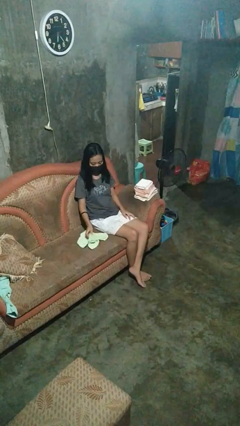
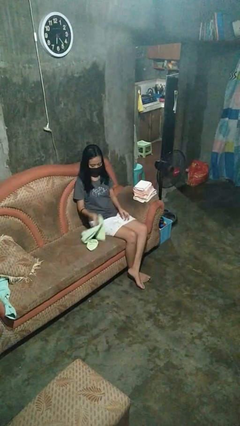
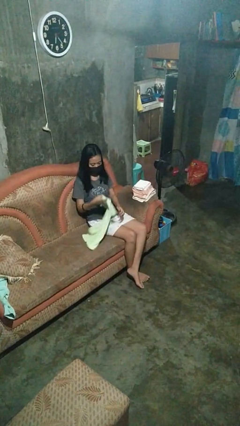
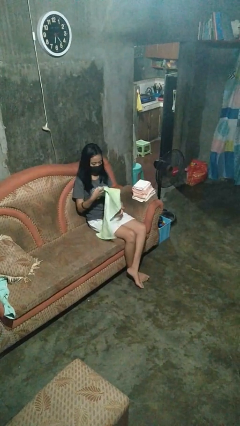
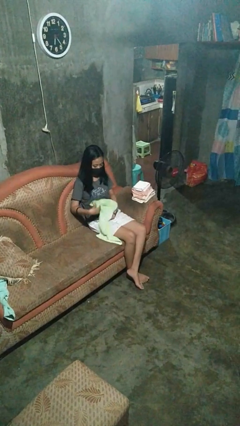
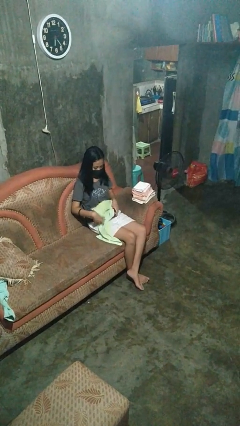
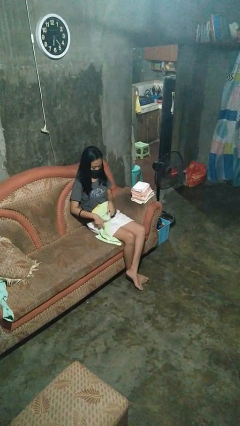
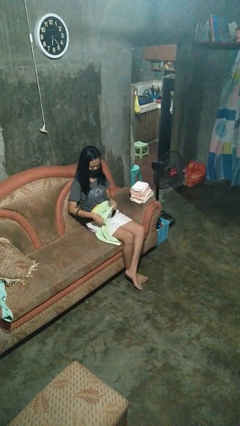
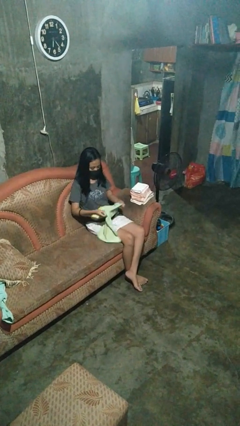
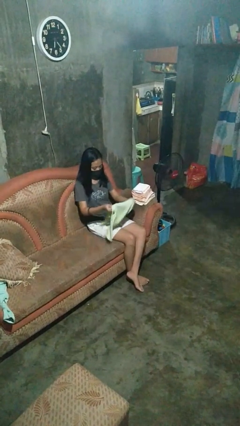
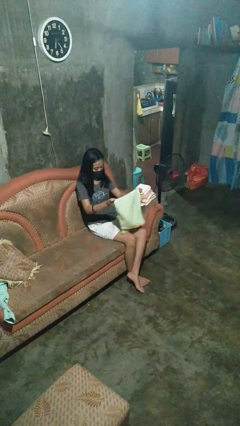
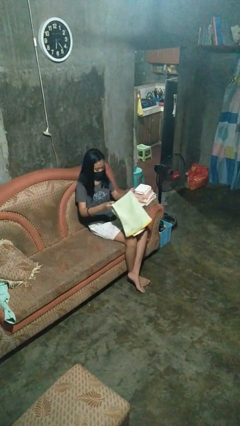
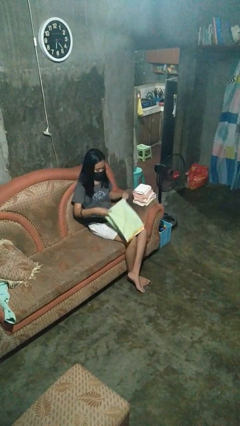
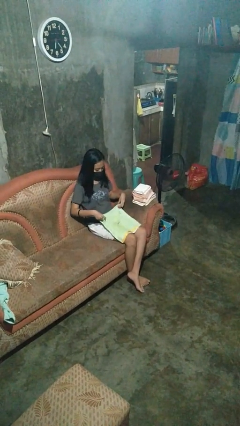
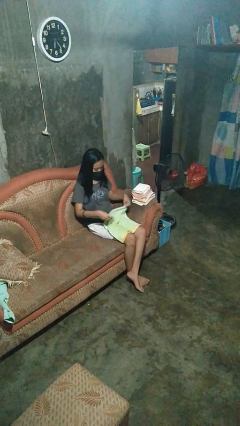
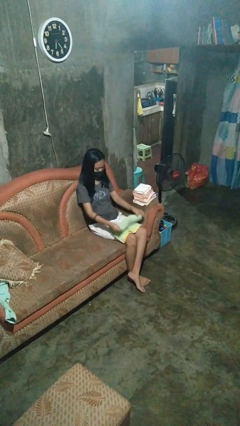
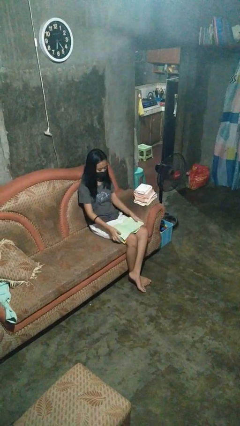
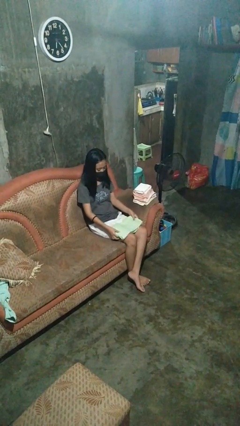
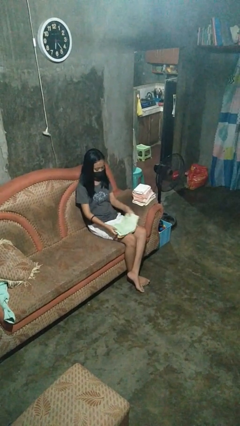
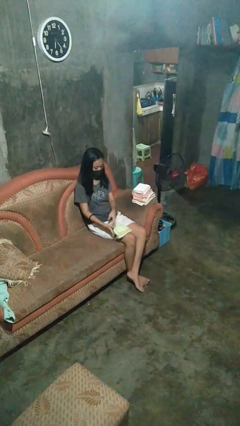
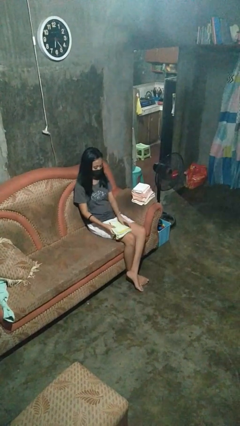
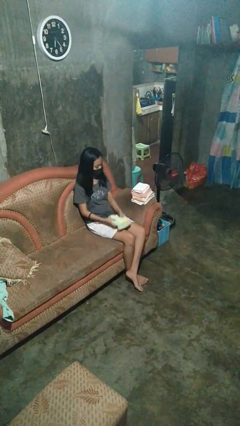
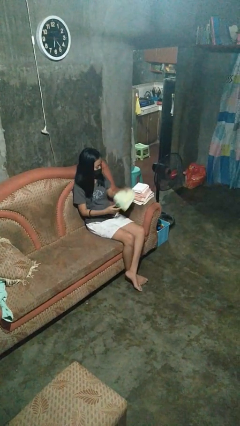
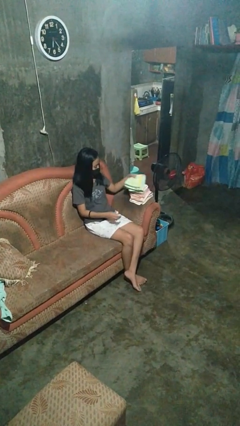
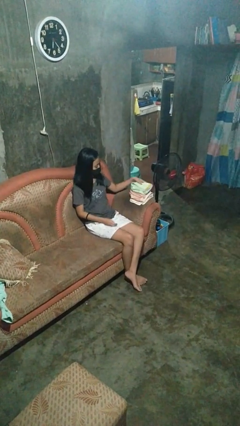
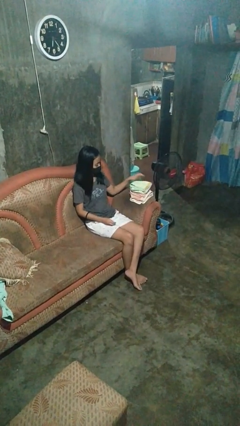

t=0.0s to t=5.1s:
person folds towel

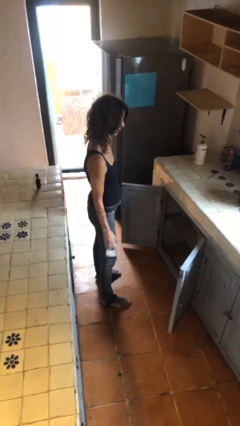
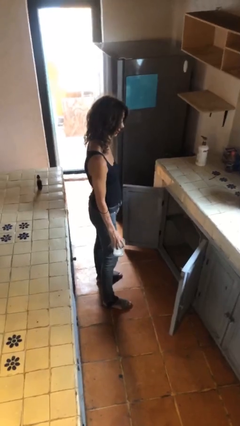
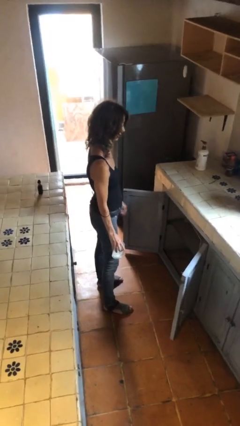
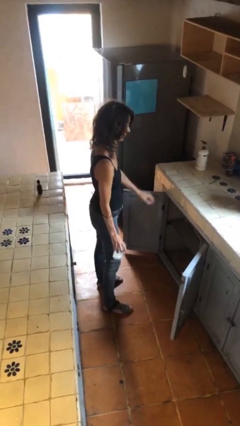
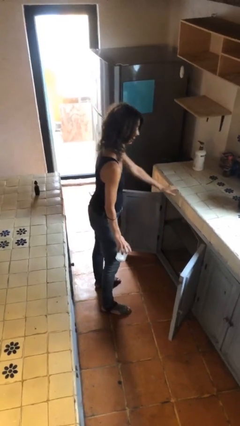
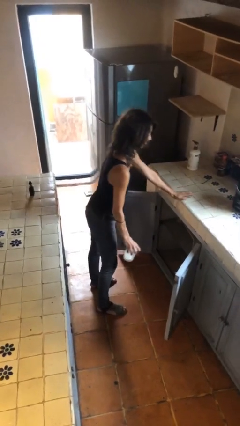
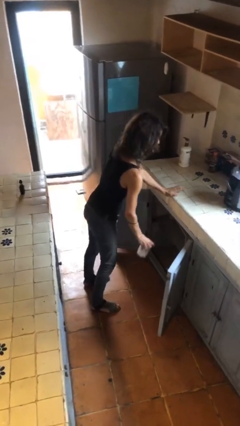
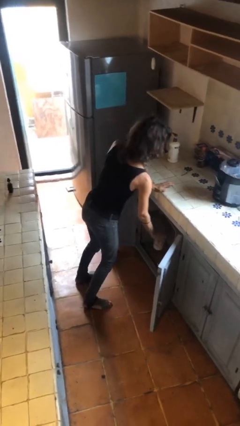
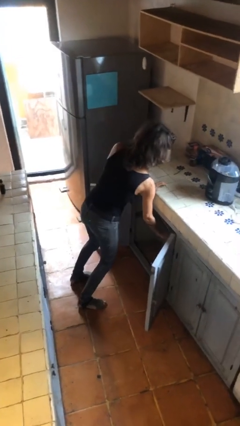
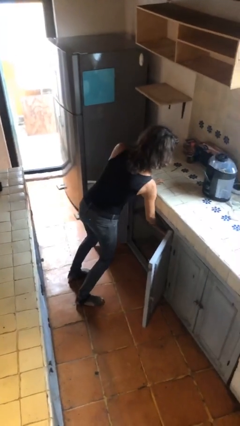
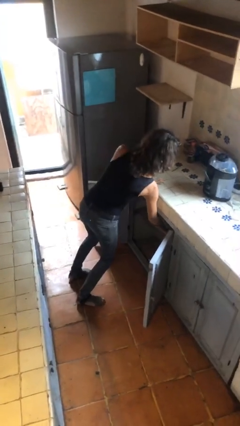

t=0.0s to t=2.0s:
person puts down object into cabinet

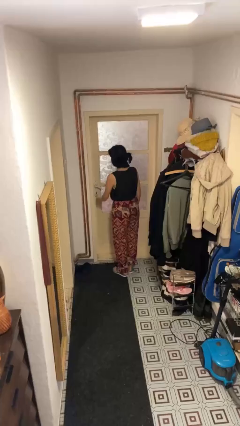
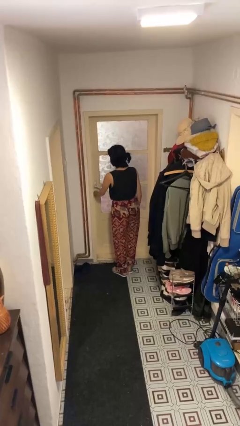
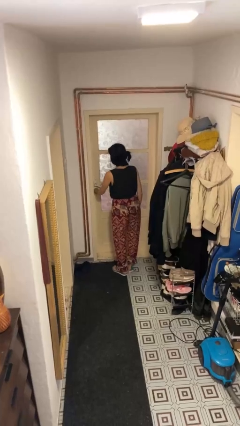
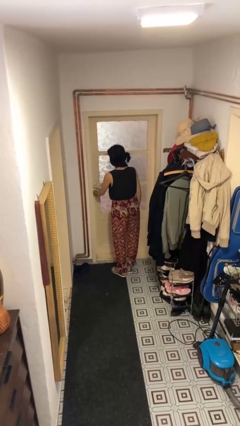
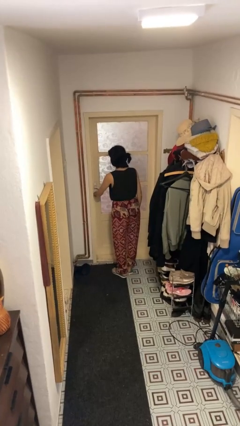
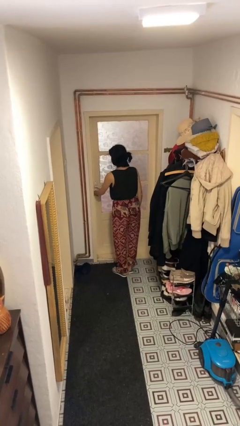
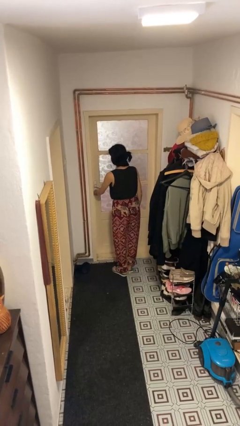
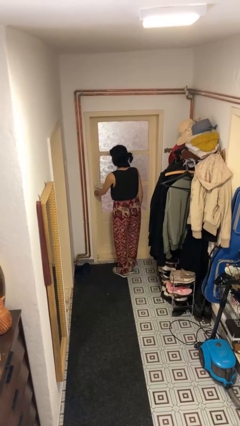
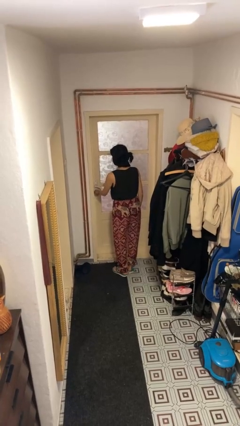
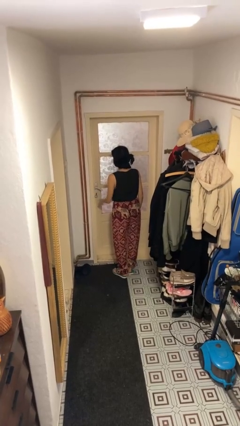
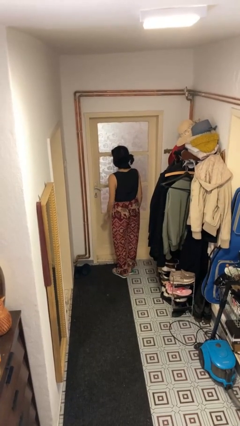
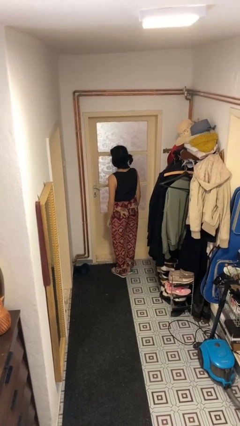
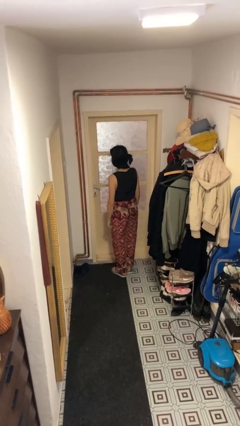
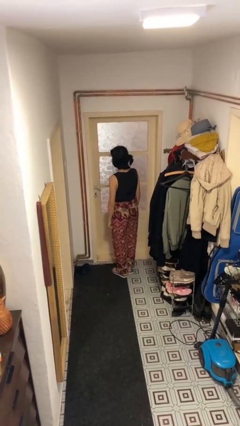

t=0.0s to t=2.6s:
person locks door with keys

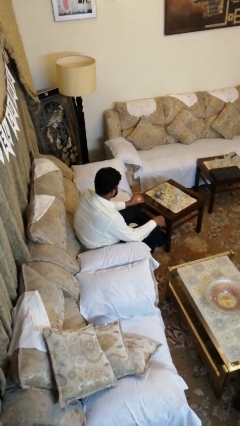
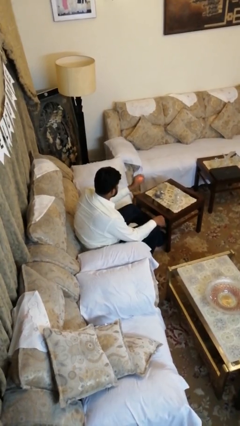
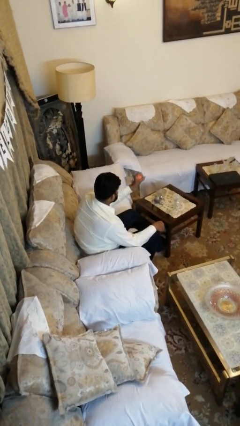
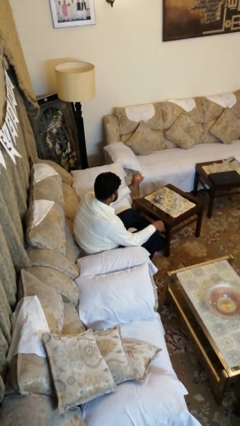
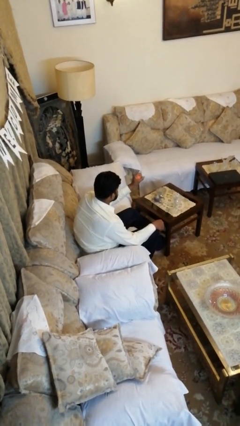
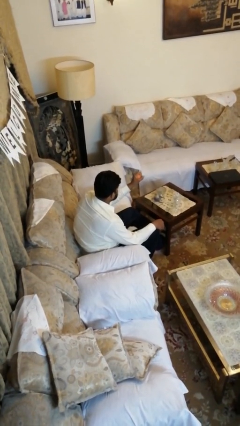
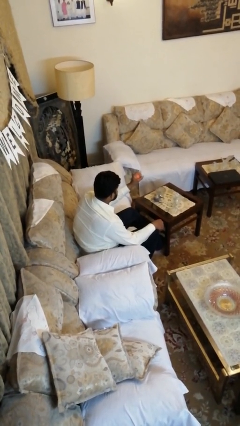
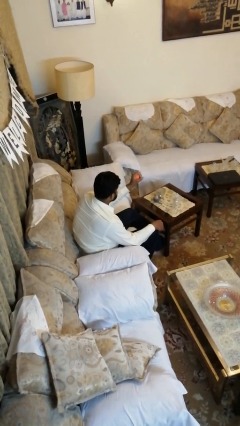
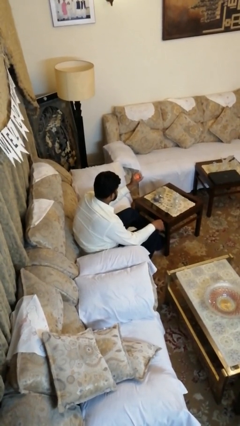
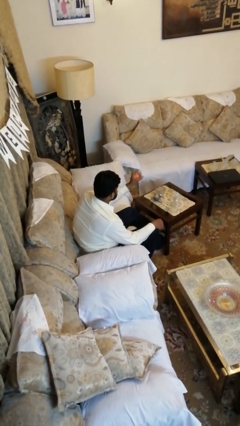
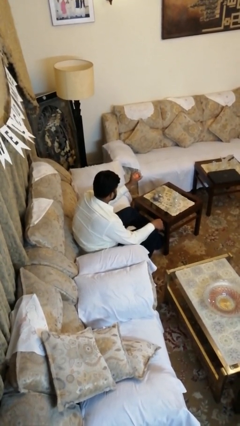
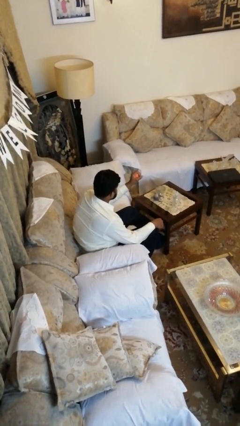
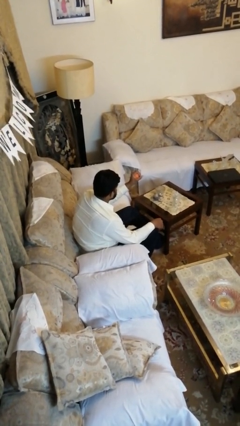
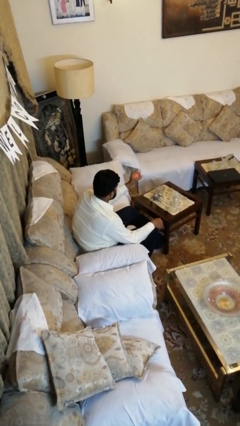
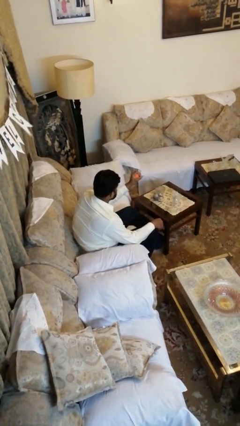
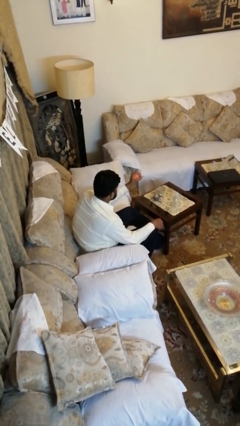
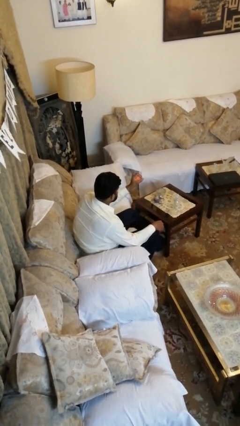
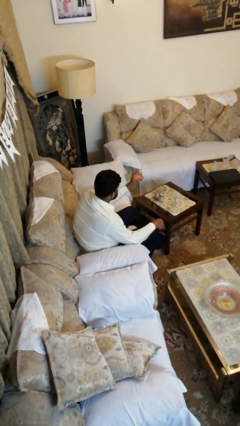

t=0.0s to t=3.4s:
person squeezes object

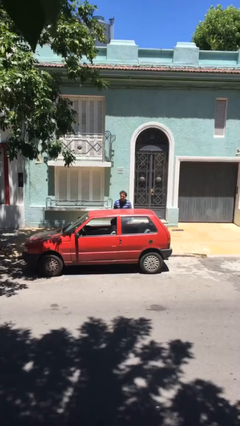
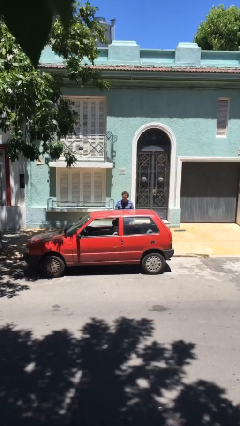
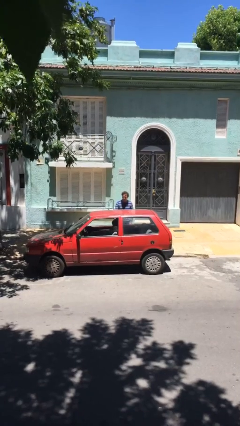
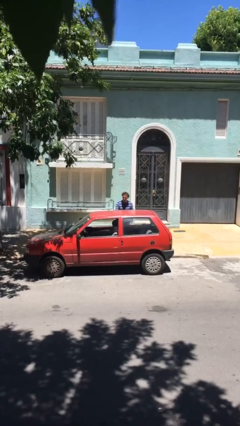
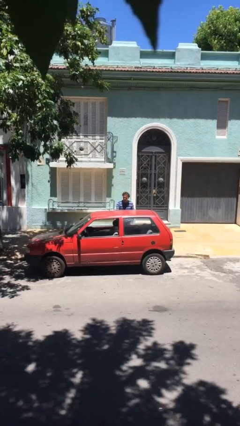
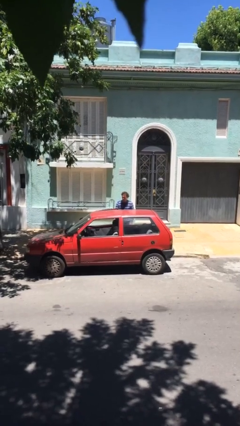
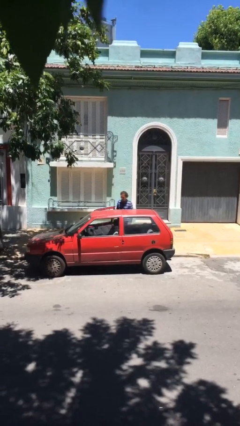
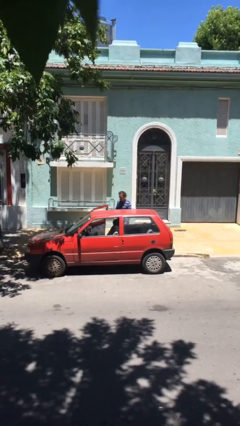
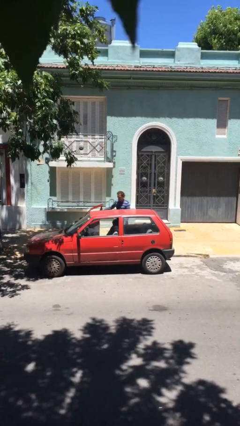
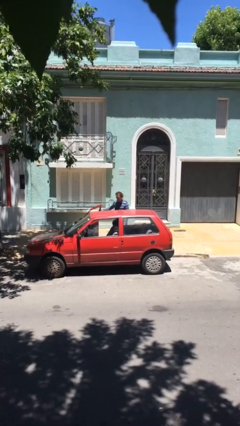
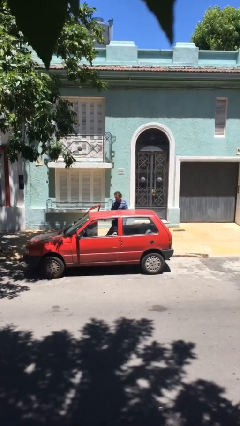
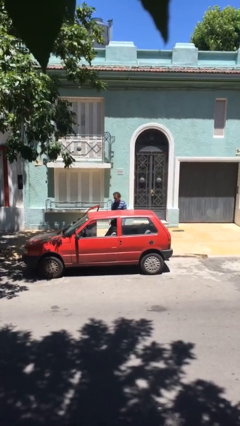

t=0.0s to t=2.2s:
person opens car door

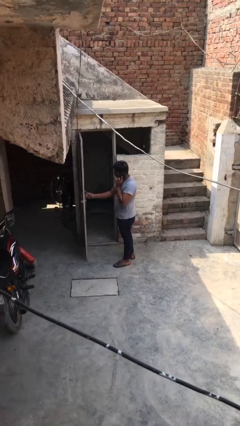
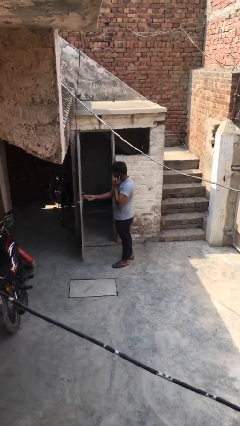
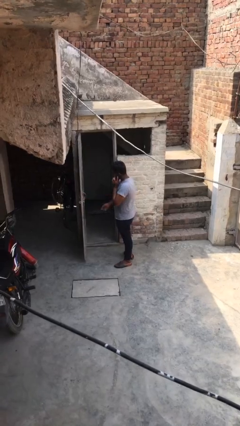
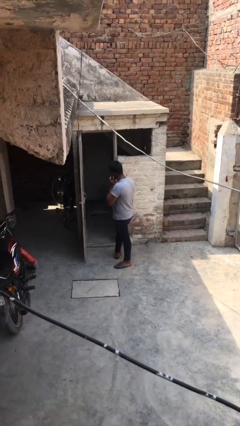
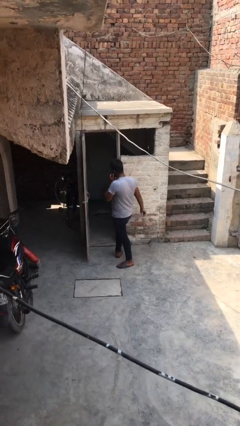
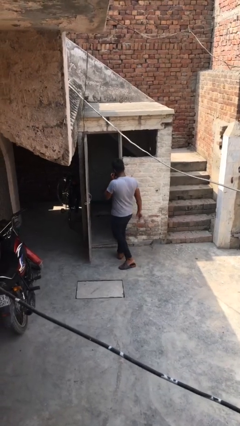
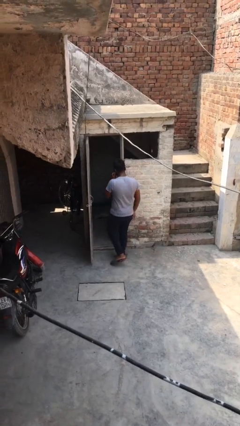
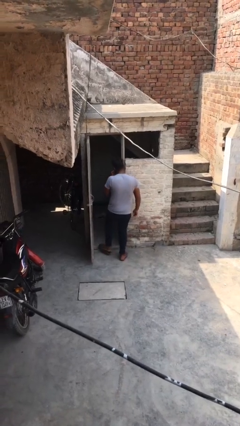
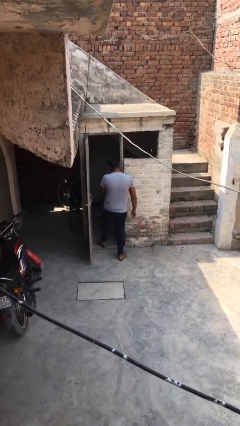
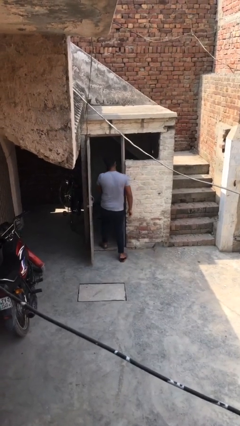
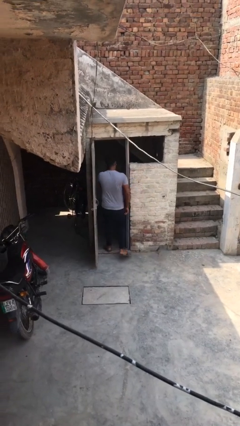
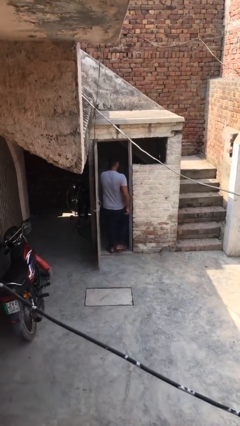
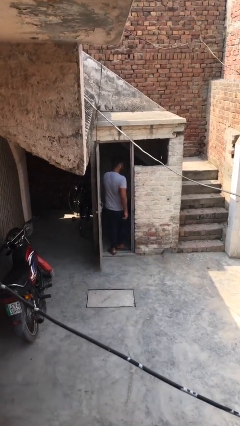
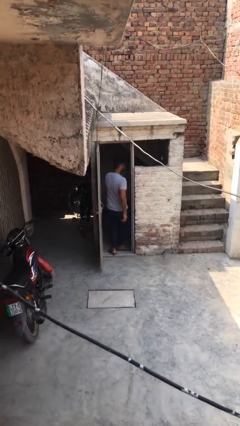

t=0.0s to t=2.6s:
person exits scene through structure
